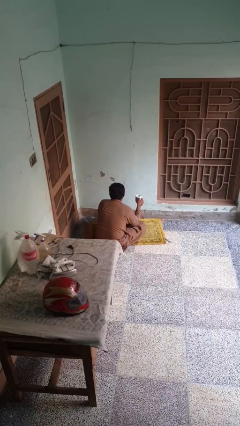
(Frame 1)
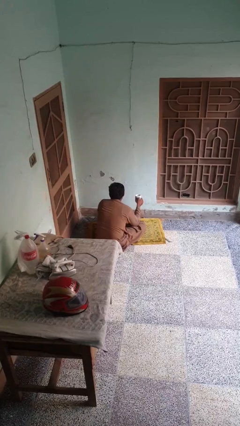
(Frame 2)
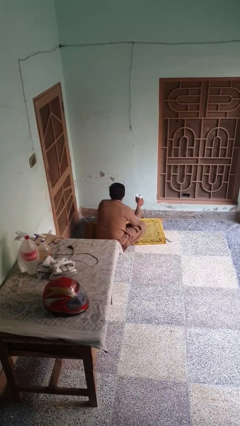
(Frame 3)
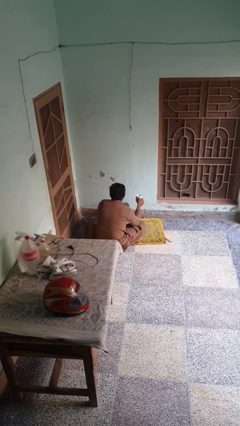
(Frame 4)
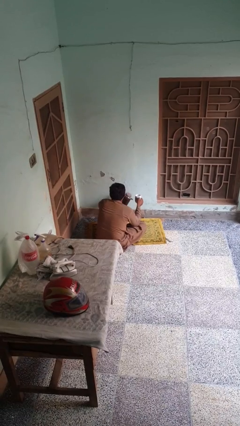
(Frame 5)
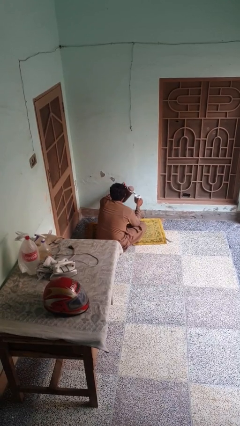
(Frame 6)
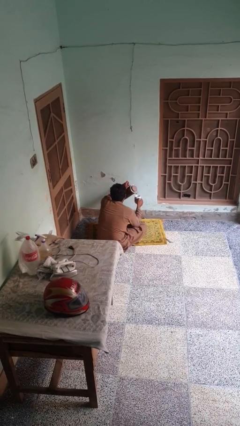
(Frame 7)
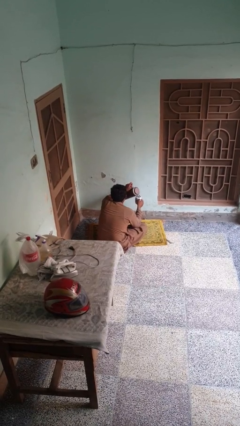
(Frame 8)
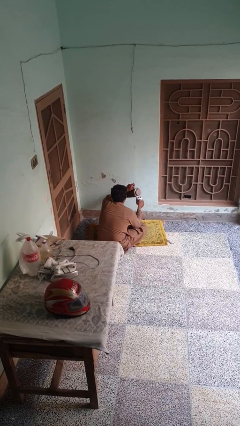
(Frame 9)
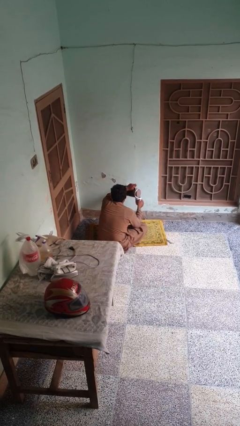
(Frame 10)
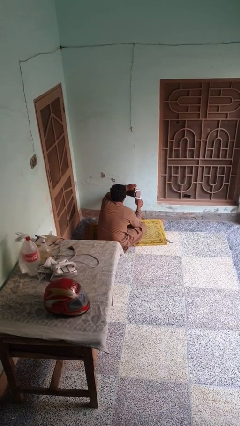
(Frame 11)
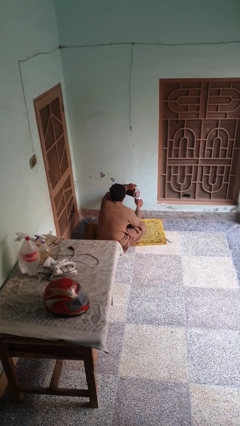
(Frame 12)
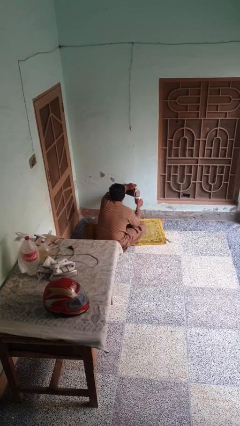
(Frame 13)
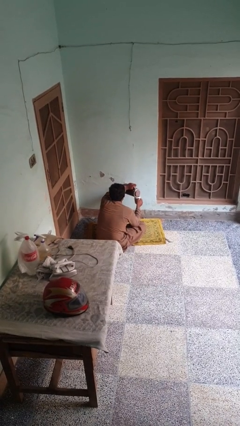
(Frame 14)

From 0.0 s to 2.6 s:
person pours coffee into mug

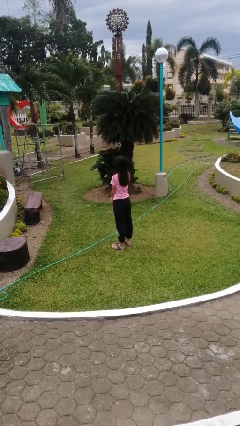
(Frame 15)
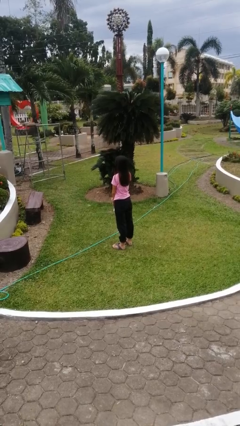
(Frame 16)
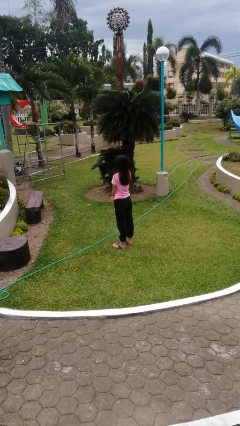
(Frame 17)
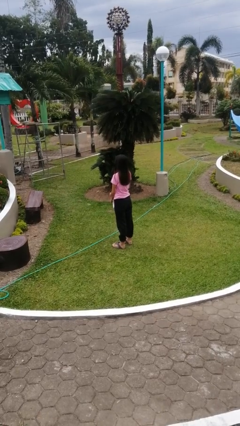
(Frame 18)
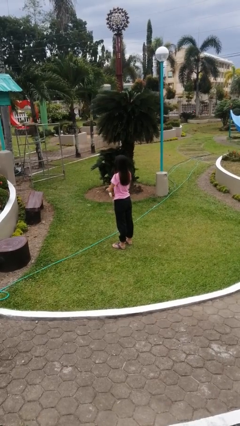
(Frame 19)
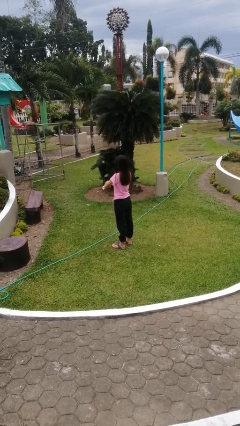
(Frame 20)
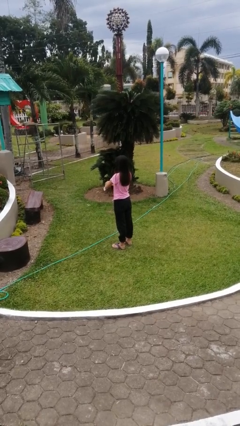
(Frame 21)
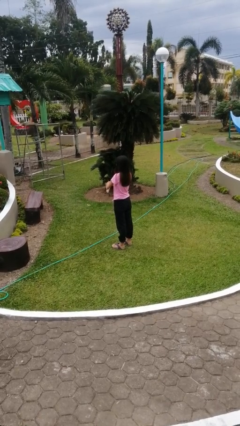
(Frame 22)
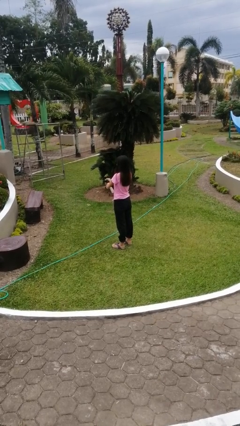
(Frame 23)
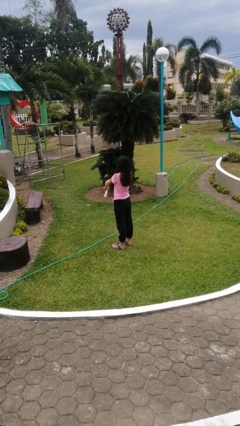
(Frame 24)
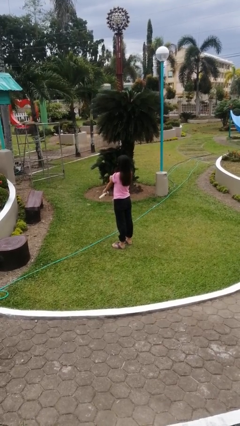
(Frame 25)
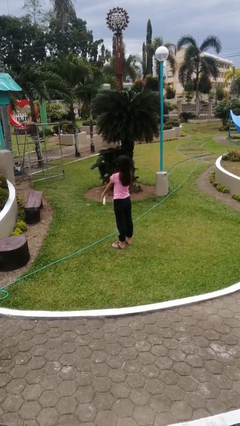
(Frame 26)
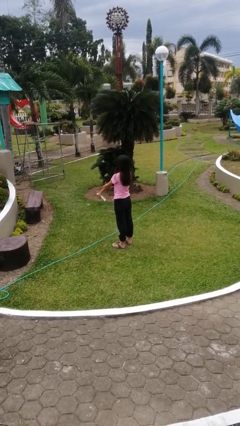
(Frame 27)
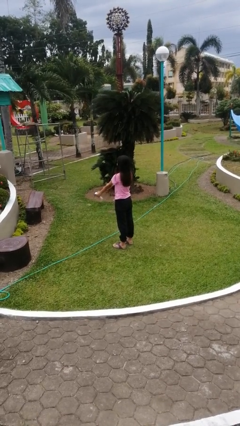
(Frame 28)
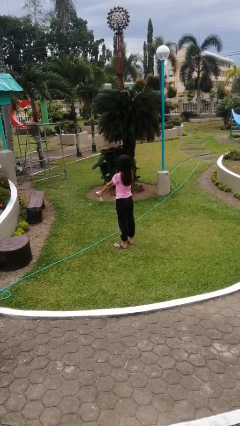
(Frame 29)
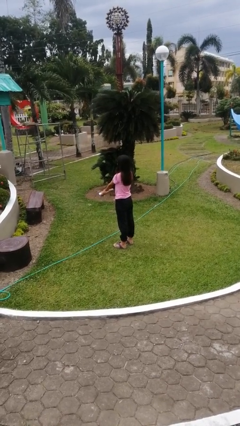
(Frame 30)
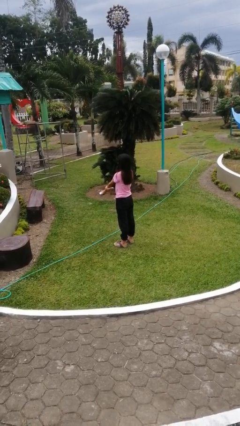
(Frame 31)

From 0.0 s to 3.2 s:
person applies sunscreen

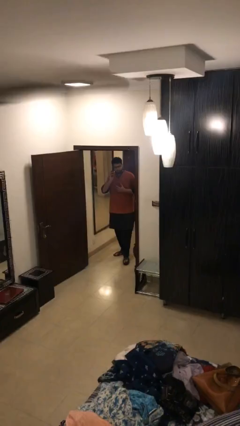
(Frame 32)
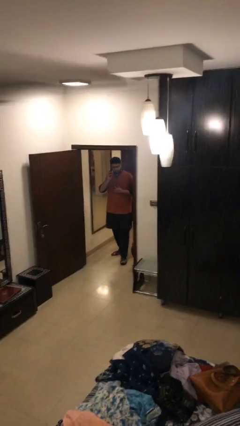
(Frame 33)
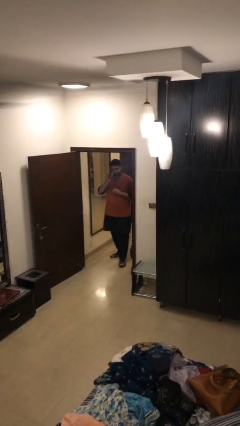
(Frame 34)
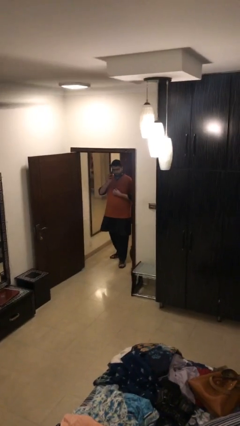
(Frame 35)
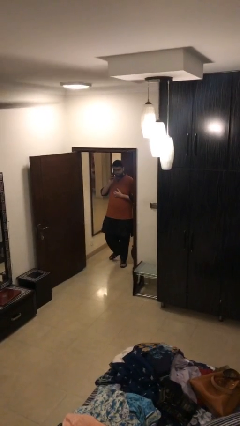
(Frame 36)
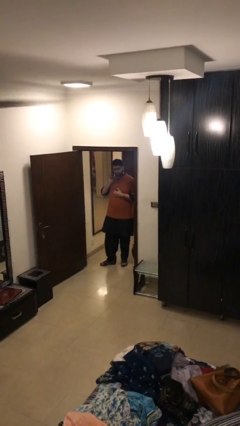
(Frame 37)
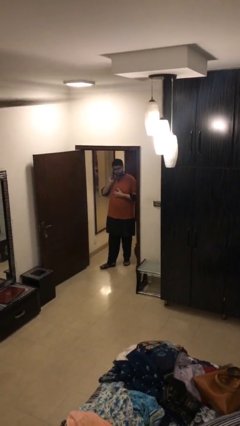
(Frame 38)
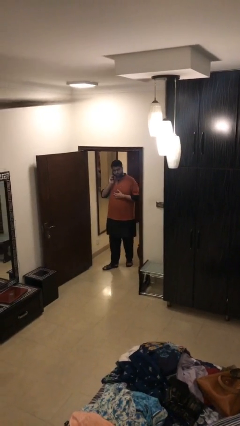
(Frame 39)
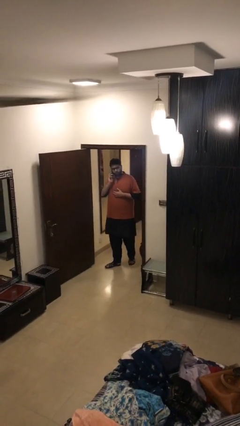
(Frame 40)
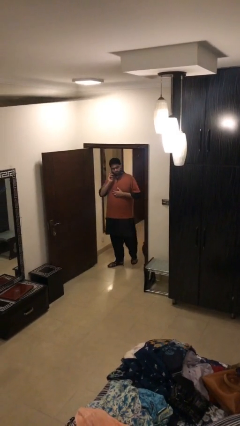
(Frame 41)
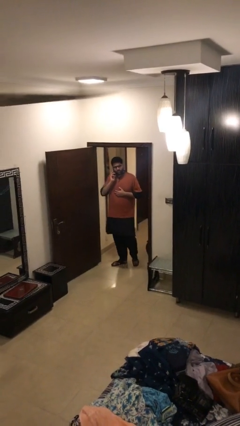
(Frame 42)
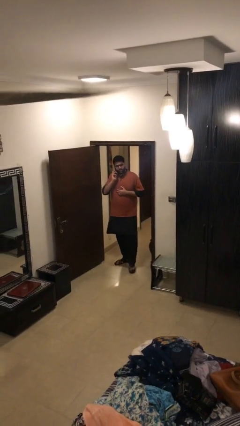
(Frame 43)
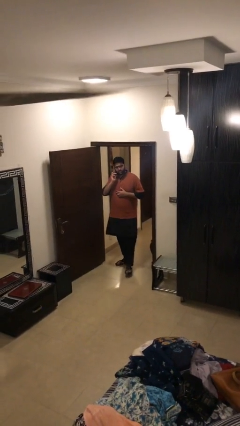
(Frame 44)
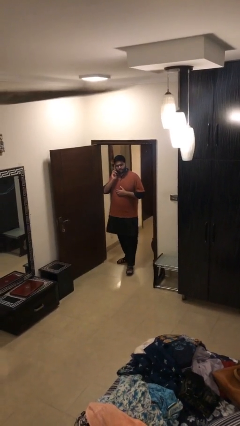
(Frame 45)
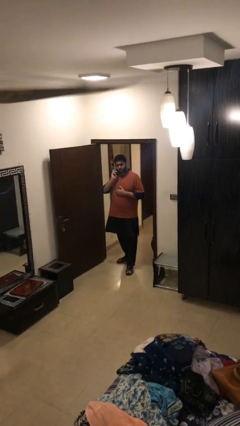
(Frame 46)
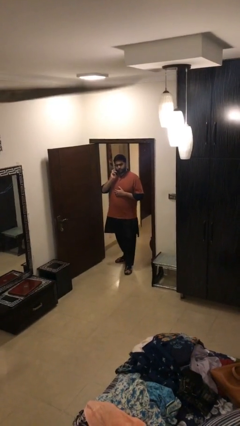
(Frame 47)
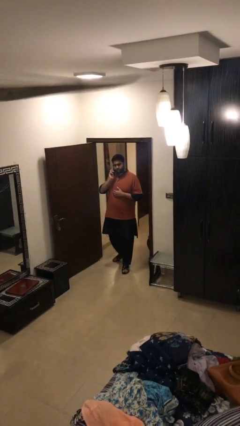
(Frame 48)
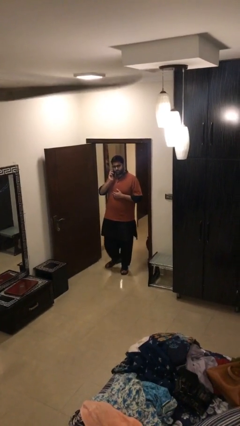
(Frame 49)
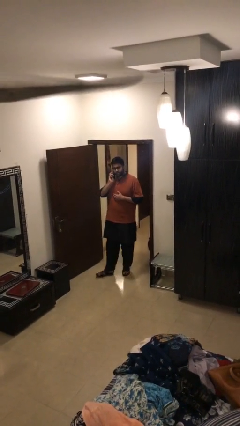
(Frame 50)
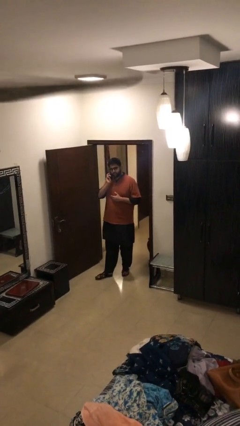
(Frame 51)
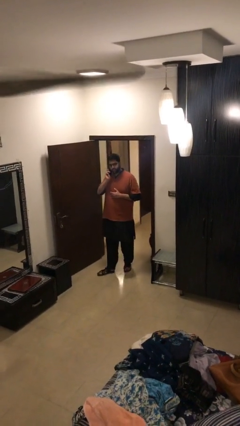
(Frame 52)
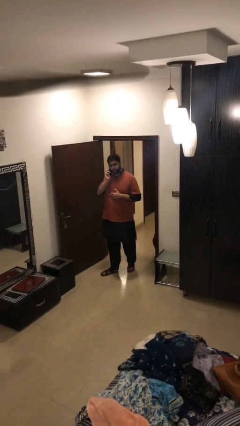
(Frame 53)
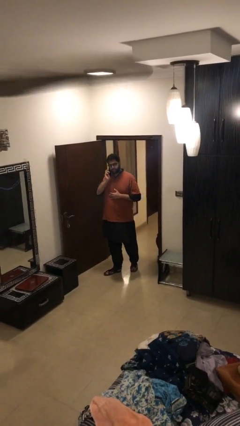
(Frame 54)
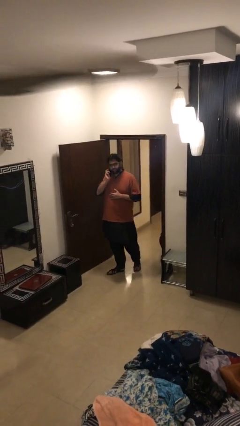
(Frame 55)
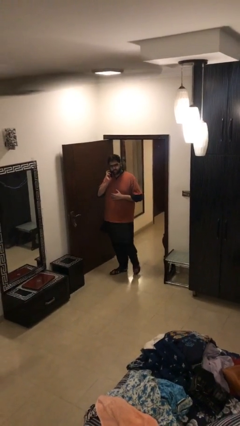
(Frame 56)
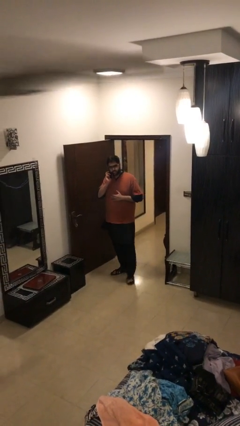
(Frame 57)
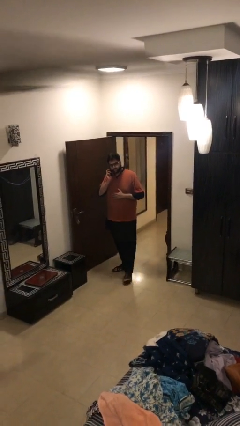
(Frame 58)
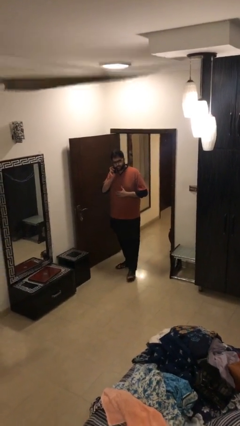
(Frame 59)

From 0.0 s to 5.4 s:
person enters scene through structure

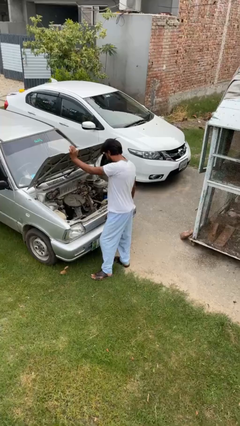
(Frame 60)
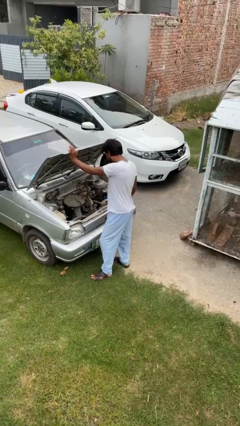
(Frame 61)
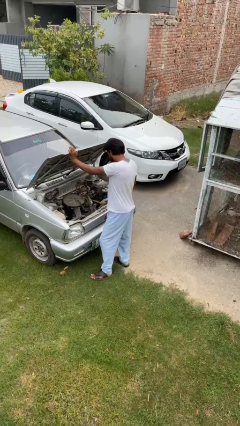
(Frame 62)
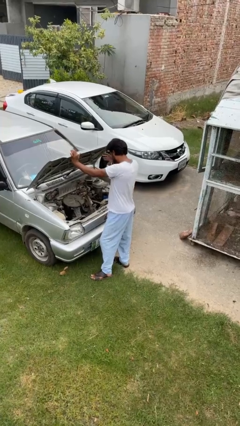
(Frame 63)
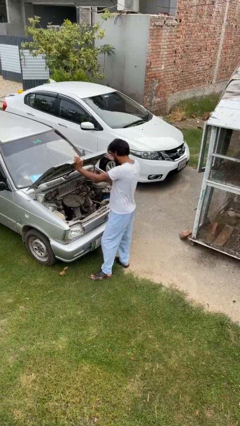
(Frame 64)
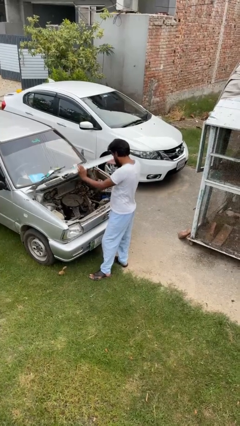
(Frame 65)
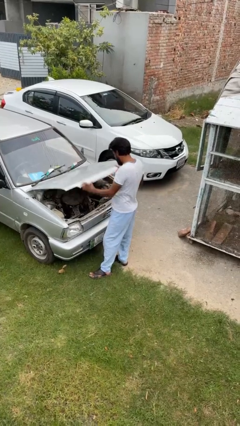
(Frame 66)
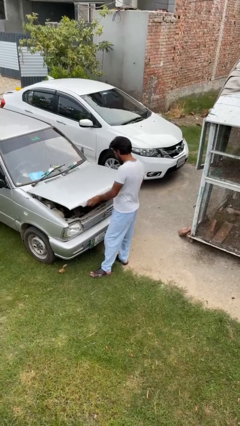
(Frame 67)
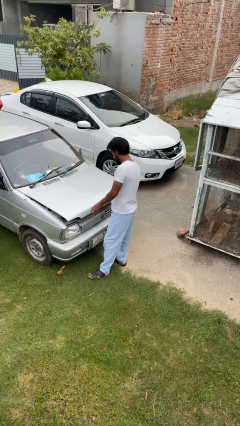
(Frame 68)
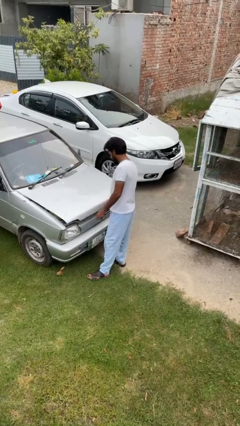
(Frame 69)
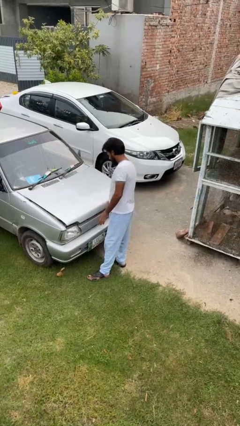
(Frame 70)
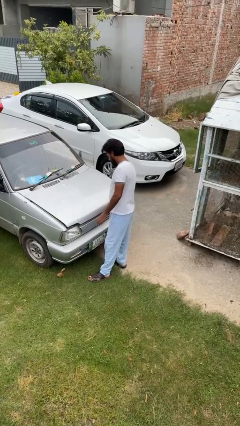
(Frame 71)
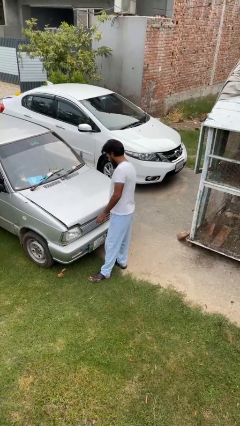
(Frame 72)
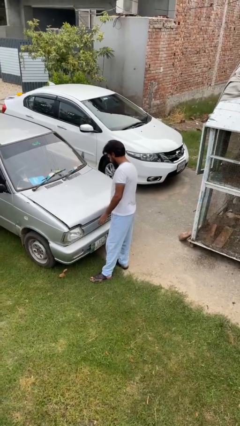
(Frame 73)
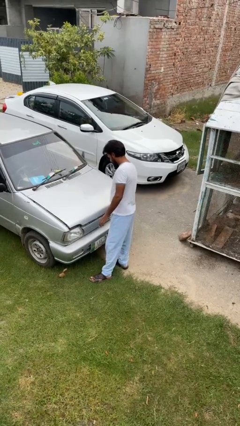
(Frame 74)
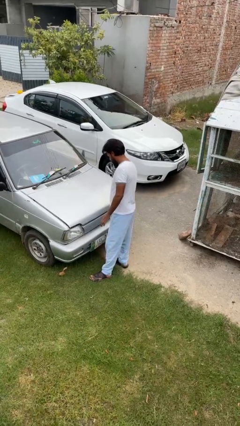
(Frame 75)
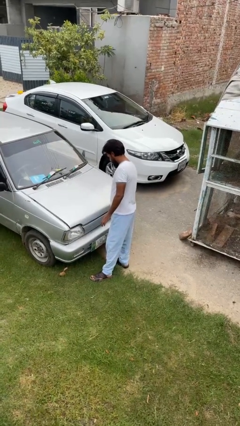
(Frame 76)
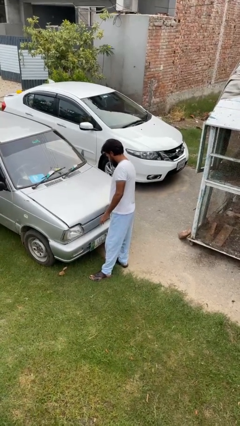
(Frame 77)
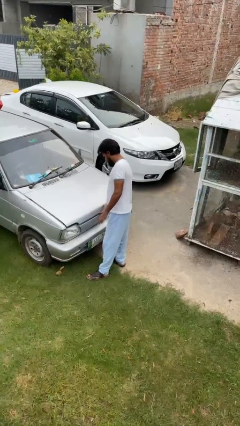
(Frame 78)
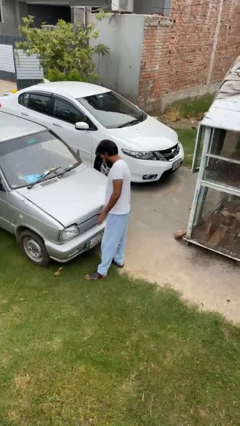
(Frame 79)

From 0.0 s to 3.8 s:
person closes car hood

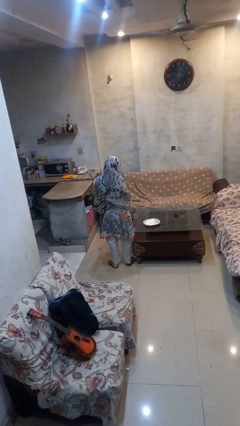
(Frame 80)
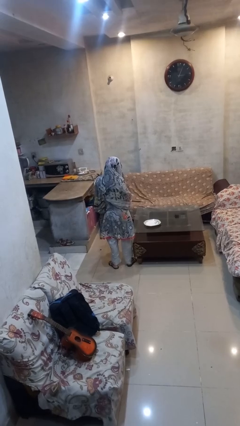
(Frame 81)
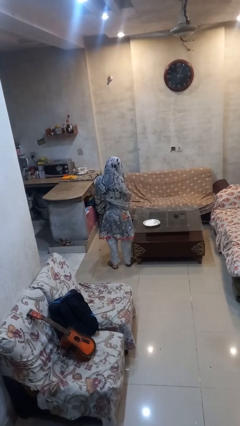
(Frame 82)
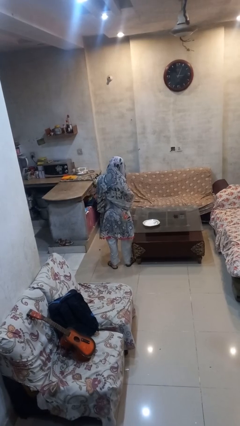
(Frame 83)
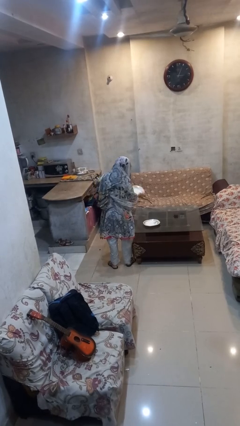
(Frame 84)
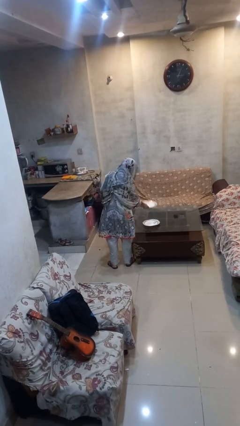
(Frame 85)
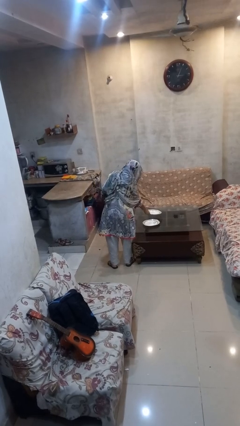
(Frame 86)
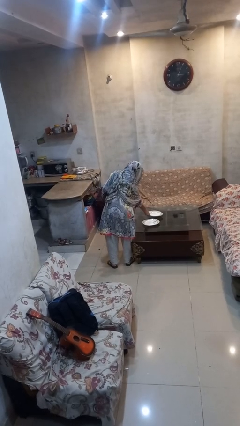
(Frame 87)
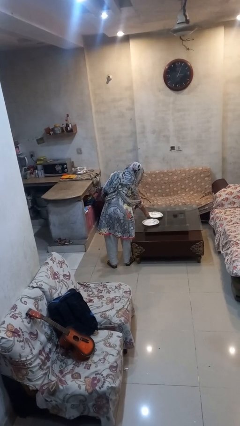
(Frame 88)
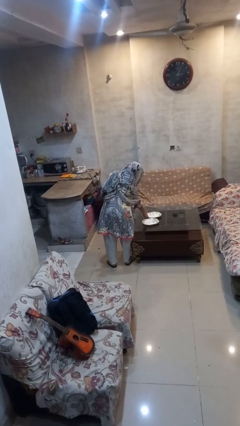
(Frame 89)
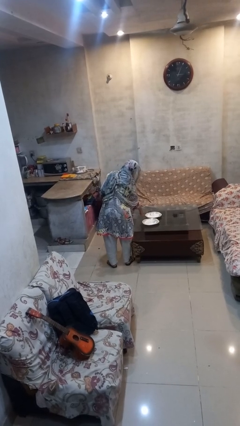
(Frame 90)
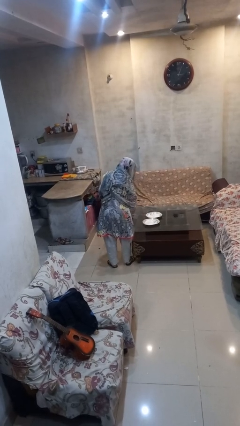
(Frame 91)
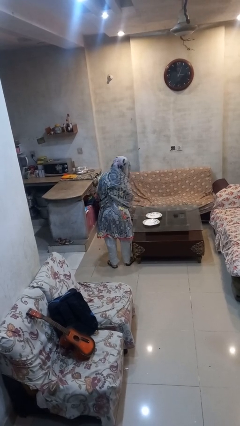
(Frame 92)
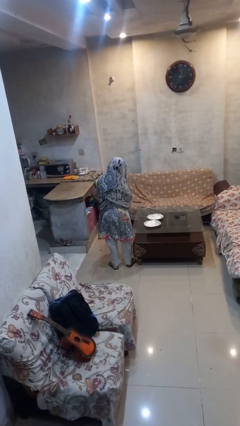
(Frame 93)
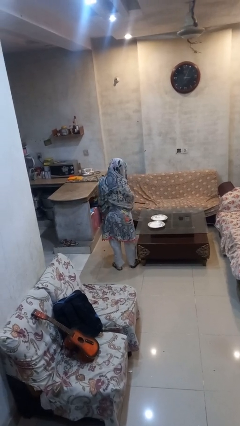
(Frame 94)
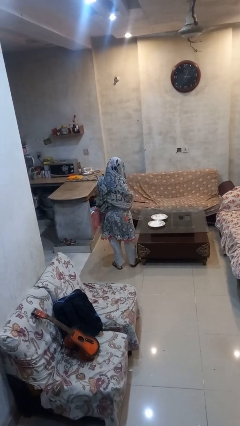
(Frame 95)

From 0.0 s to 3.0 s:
person sets table
